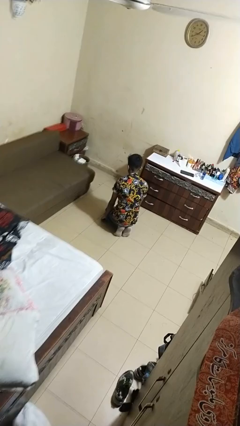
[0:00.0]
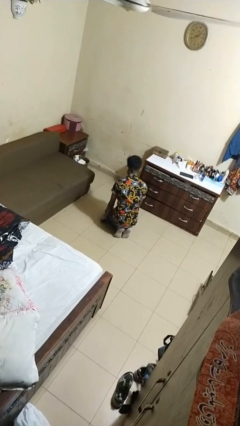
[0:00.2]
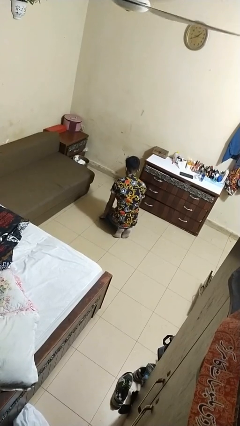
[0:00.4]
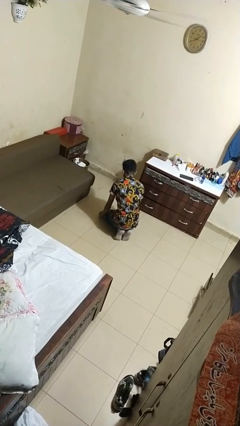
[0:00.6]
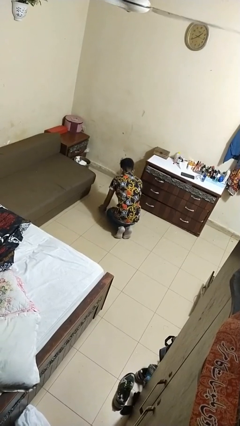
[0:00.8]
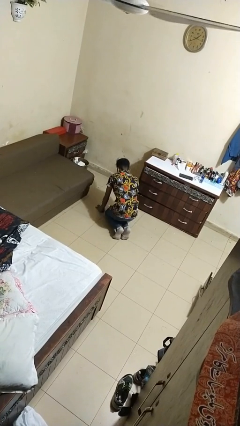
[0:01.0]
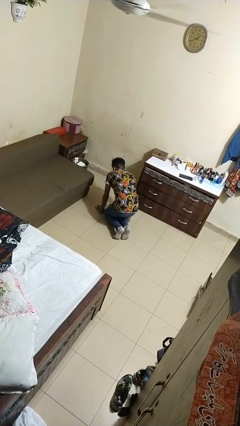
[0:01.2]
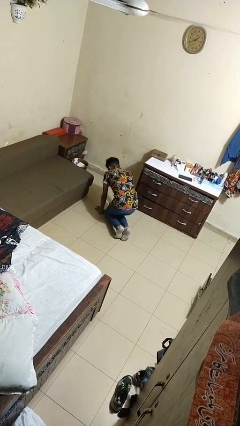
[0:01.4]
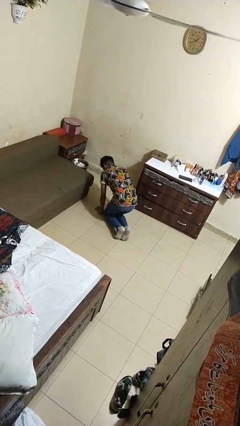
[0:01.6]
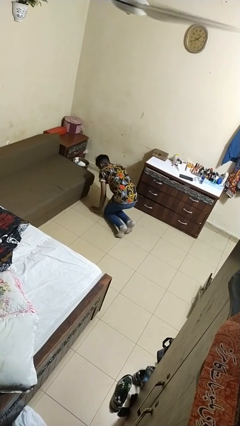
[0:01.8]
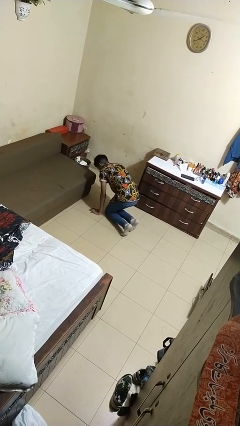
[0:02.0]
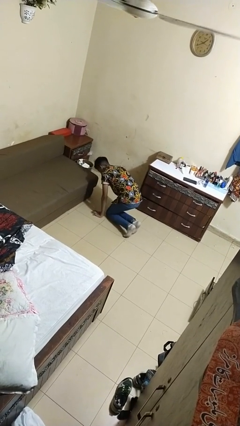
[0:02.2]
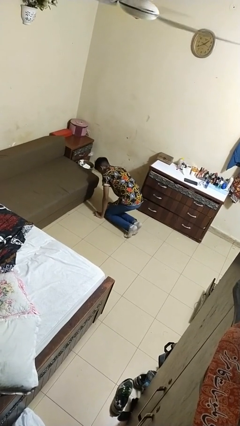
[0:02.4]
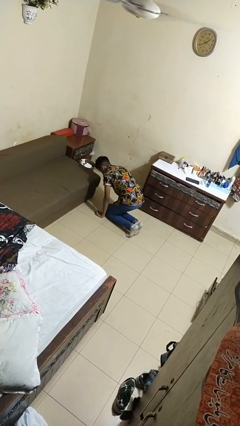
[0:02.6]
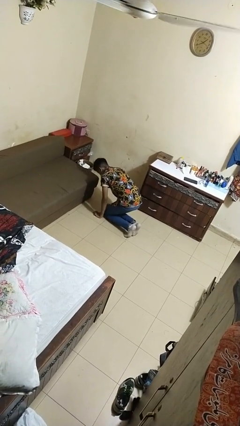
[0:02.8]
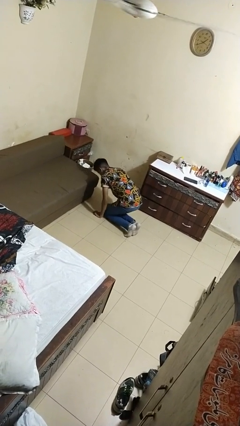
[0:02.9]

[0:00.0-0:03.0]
person crawls

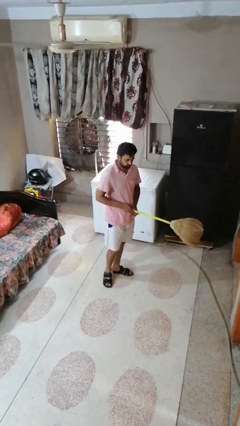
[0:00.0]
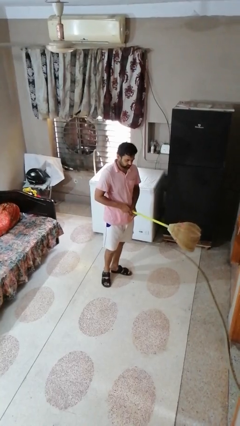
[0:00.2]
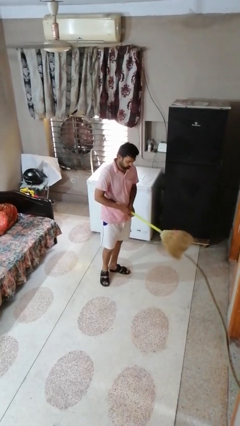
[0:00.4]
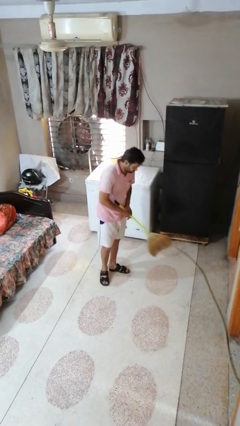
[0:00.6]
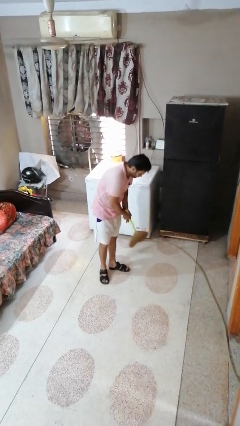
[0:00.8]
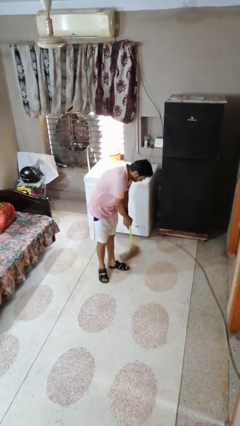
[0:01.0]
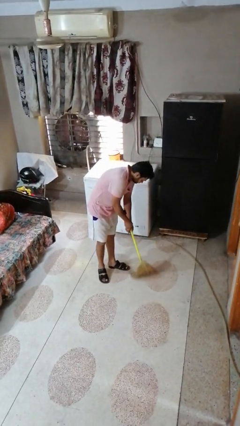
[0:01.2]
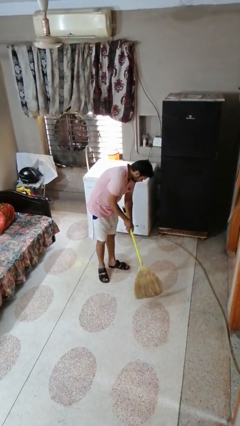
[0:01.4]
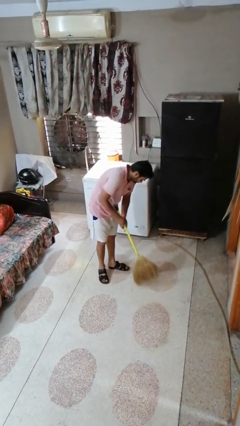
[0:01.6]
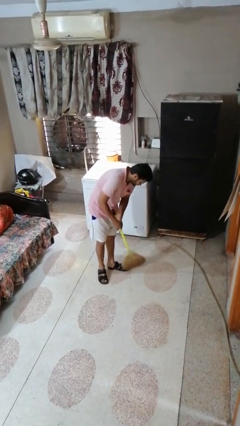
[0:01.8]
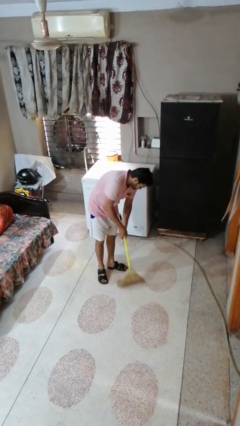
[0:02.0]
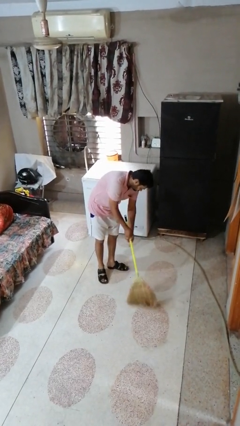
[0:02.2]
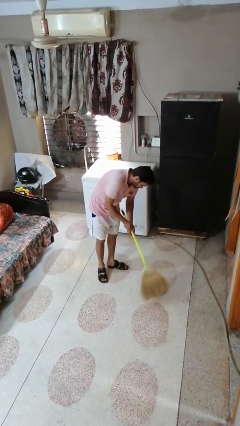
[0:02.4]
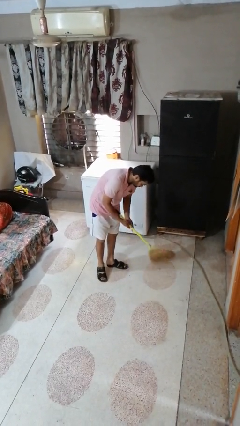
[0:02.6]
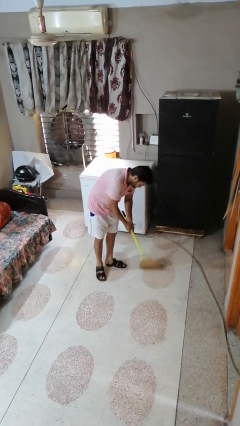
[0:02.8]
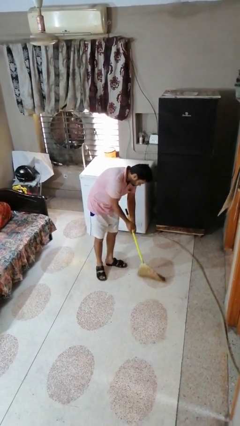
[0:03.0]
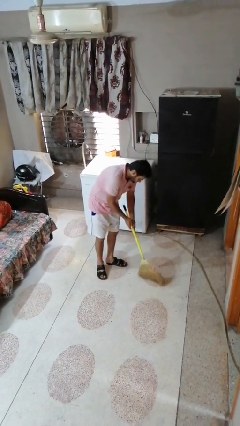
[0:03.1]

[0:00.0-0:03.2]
person sweeps floor

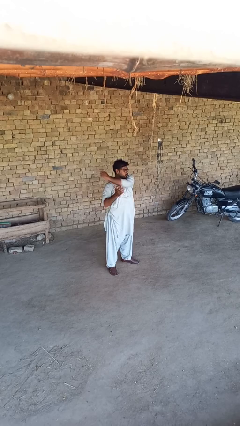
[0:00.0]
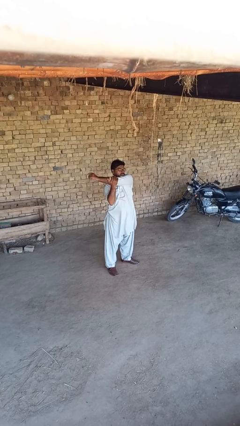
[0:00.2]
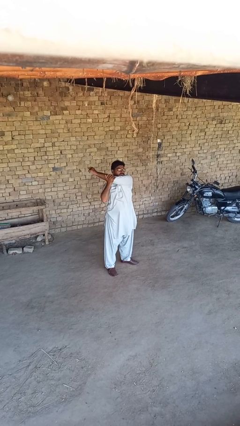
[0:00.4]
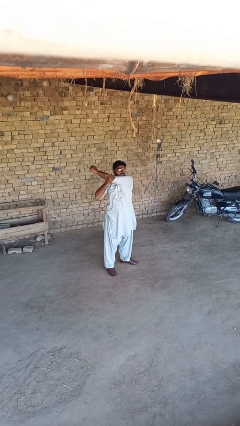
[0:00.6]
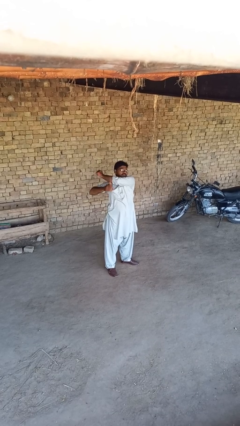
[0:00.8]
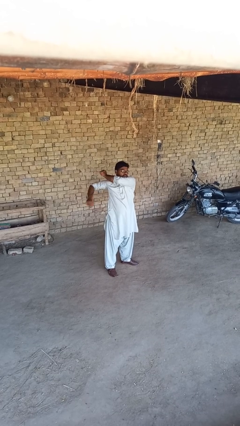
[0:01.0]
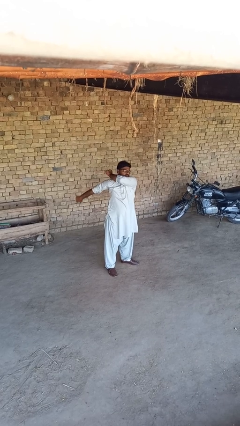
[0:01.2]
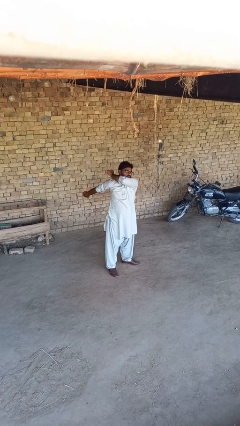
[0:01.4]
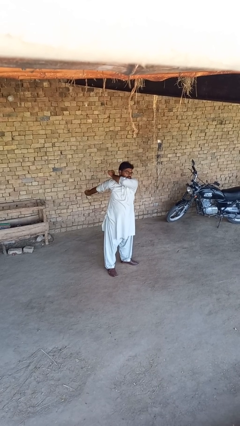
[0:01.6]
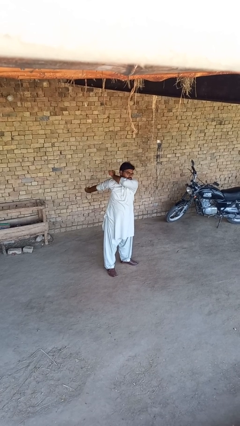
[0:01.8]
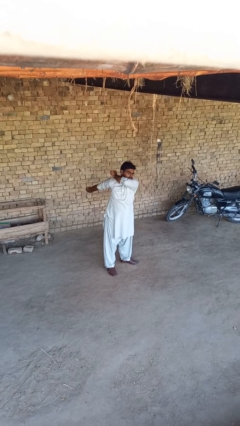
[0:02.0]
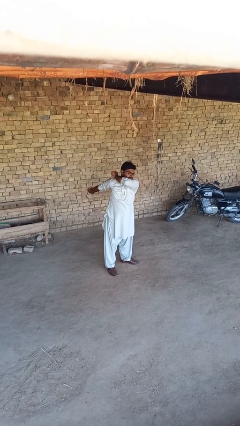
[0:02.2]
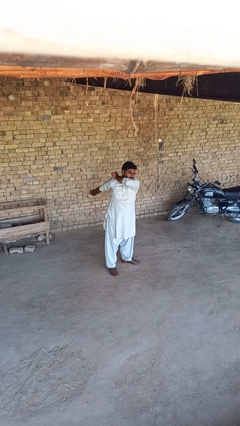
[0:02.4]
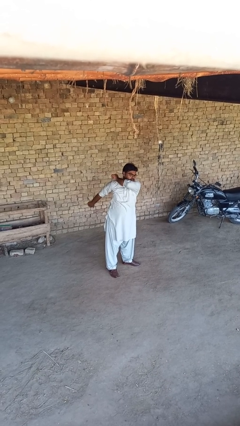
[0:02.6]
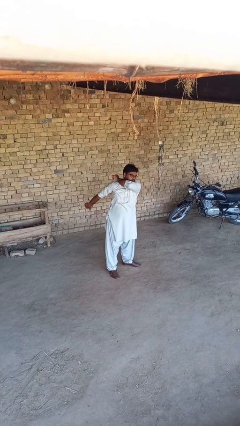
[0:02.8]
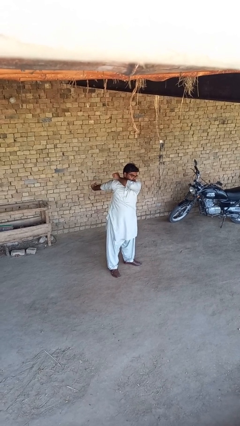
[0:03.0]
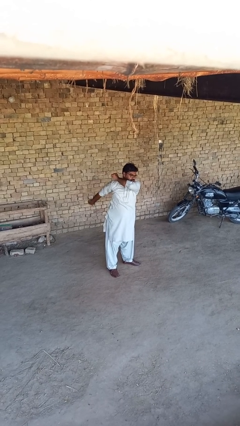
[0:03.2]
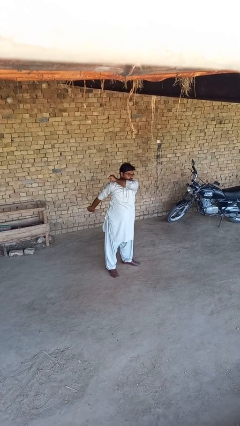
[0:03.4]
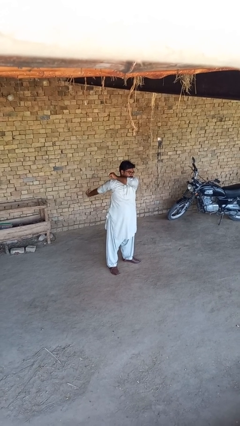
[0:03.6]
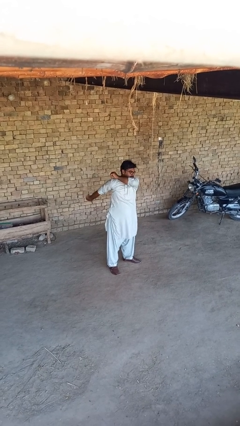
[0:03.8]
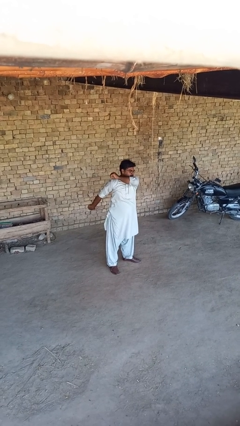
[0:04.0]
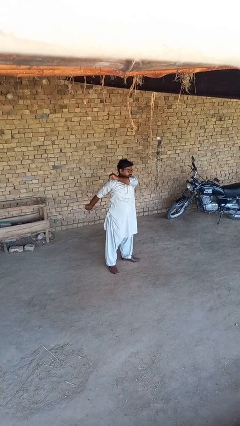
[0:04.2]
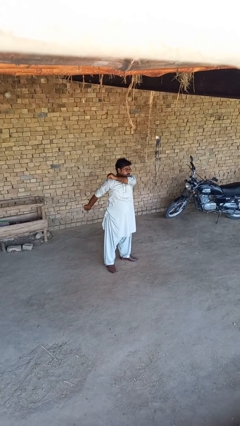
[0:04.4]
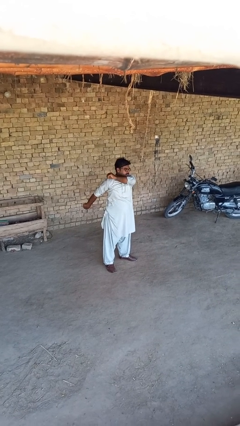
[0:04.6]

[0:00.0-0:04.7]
person stretches arms to side

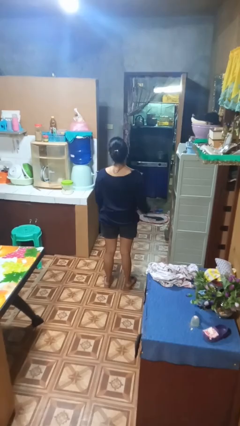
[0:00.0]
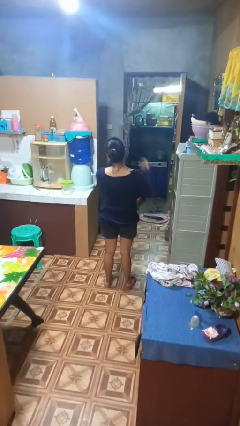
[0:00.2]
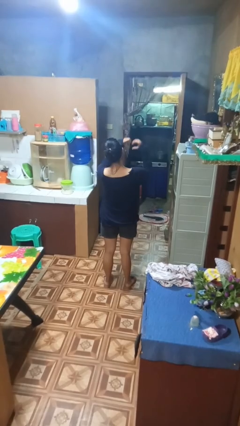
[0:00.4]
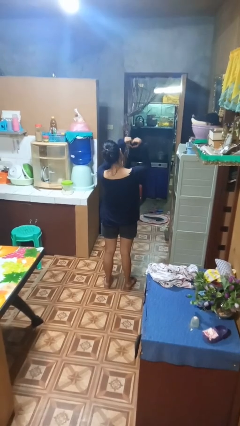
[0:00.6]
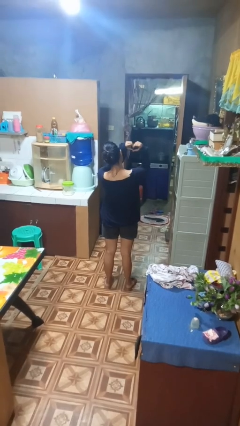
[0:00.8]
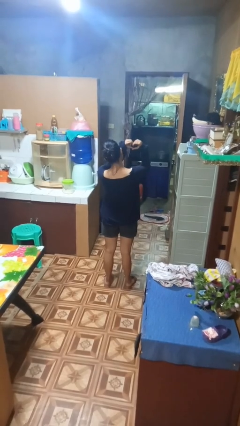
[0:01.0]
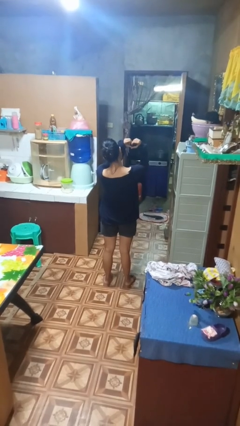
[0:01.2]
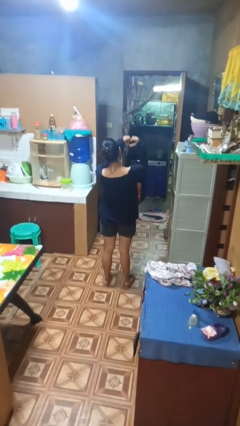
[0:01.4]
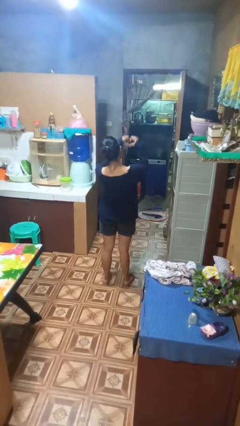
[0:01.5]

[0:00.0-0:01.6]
person gestures heart

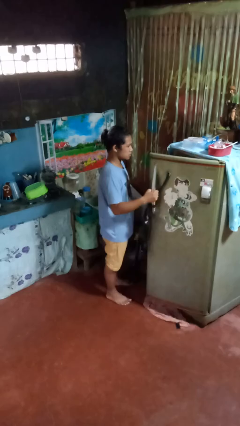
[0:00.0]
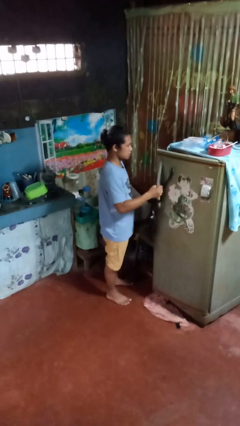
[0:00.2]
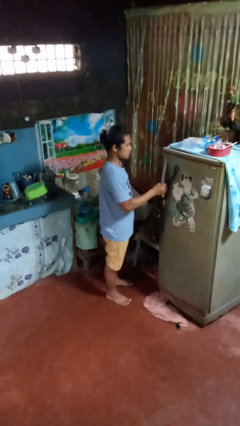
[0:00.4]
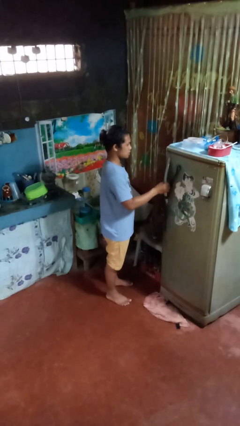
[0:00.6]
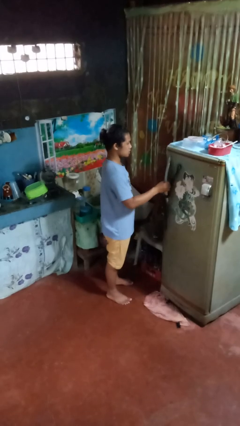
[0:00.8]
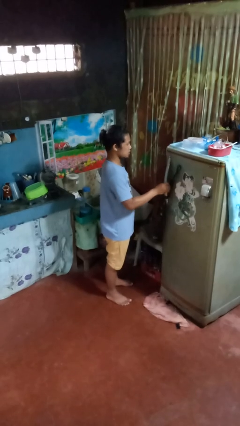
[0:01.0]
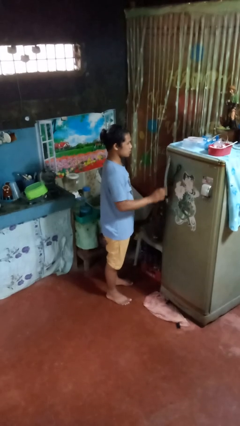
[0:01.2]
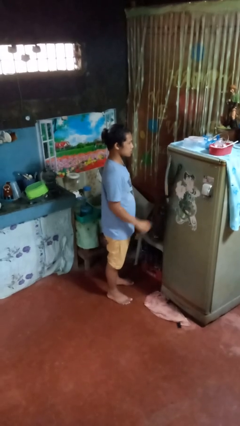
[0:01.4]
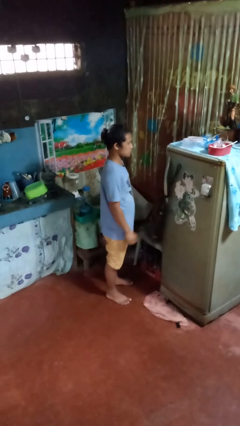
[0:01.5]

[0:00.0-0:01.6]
person closes refrigerator

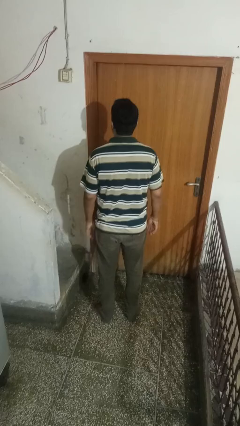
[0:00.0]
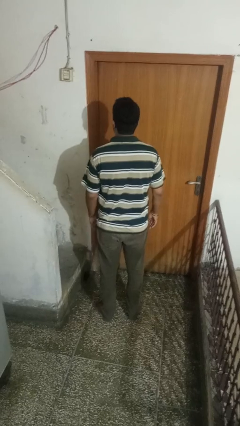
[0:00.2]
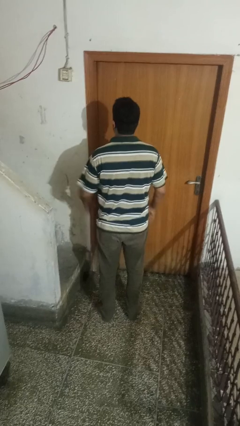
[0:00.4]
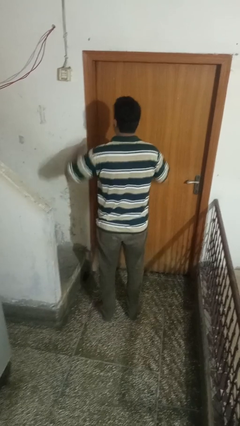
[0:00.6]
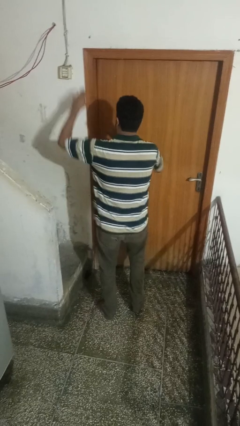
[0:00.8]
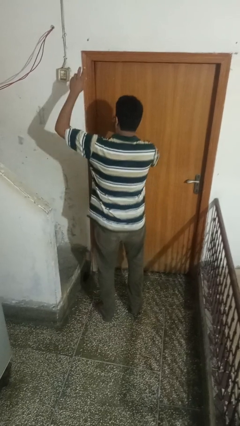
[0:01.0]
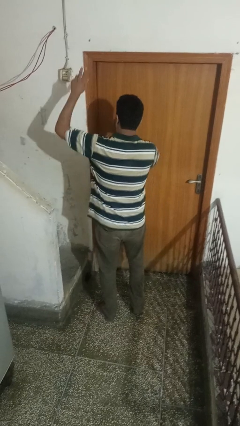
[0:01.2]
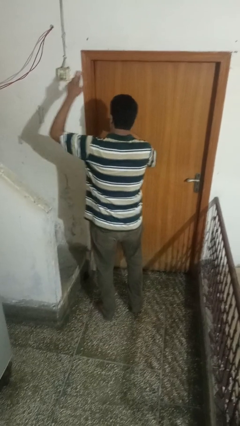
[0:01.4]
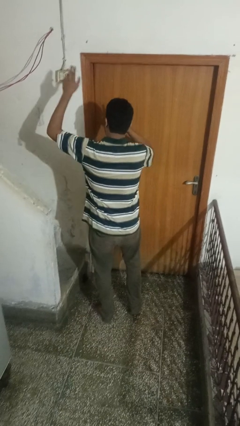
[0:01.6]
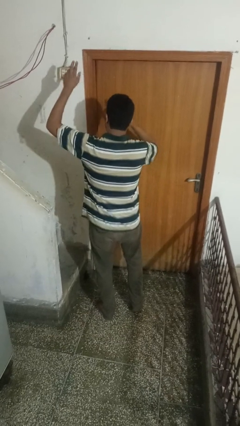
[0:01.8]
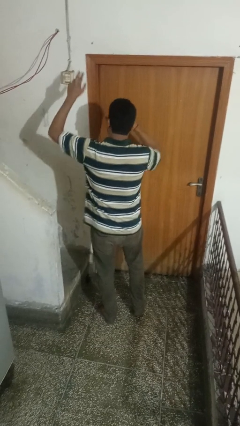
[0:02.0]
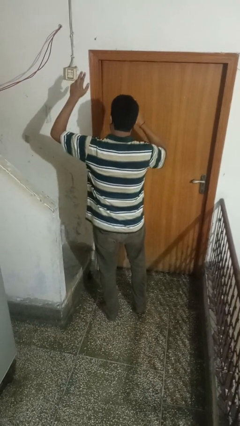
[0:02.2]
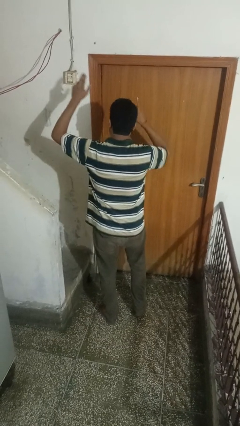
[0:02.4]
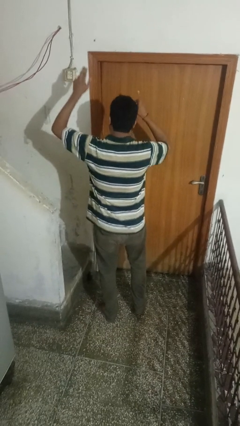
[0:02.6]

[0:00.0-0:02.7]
person dances in place

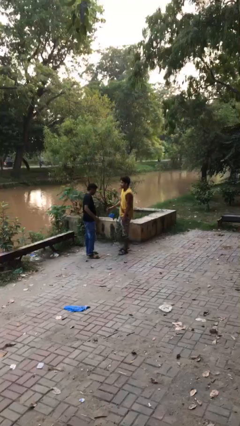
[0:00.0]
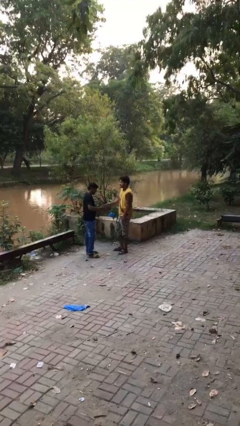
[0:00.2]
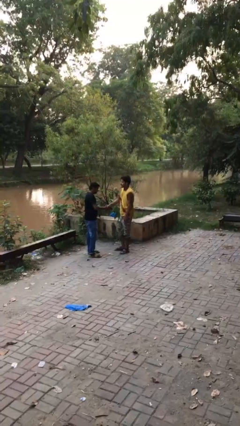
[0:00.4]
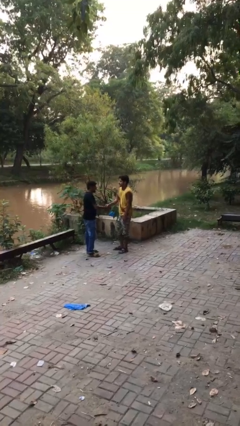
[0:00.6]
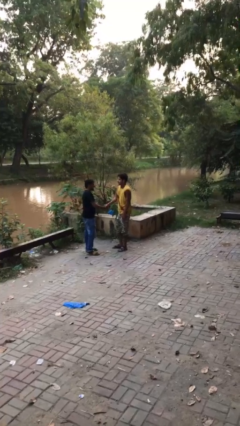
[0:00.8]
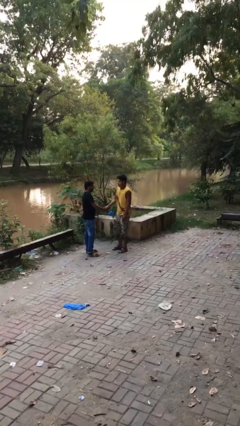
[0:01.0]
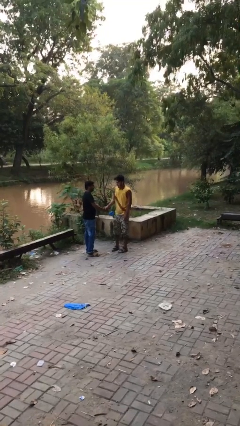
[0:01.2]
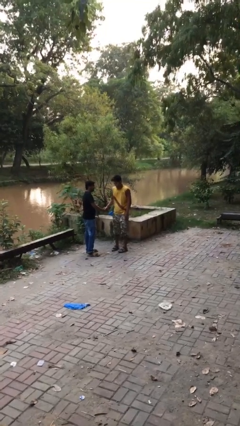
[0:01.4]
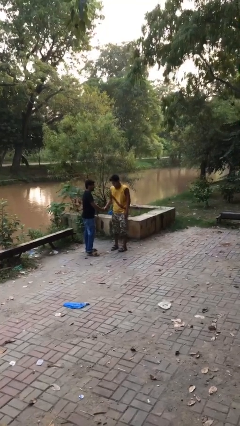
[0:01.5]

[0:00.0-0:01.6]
person shakes hand
